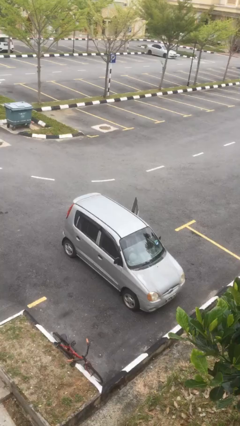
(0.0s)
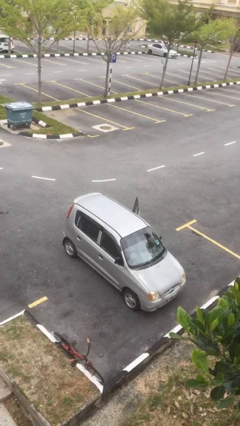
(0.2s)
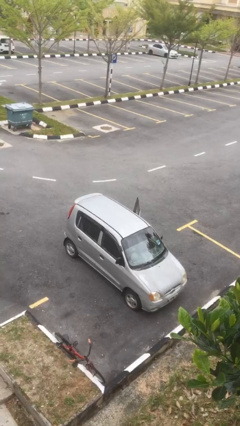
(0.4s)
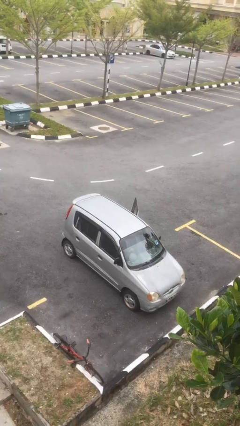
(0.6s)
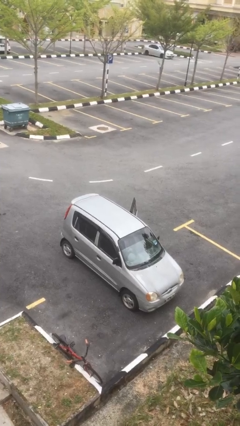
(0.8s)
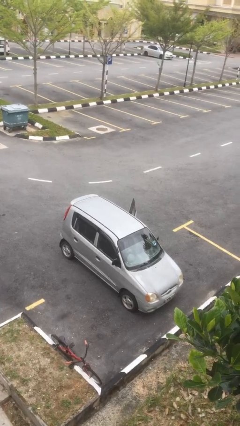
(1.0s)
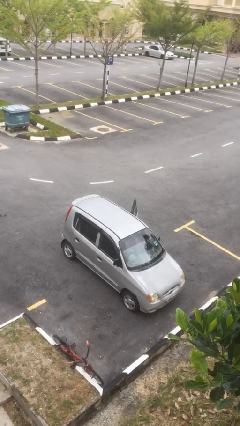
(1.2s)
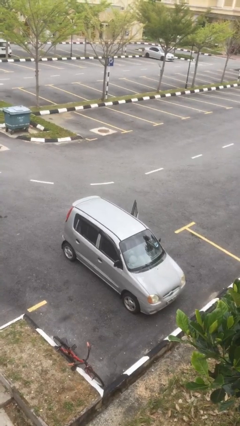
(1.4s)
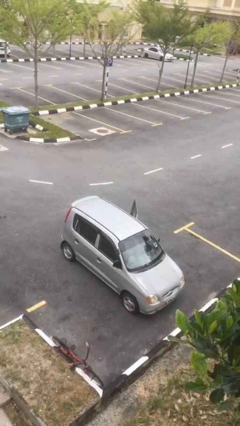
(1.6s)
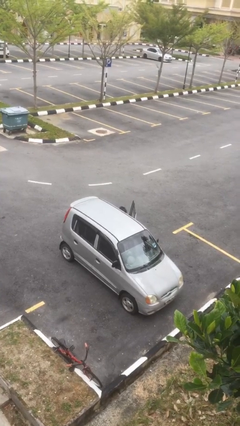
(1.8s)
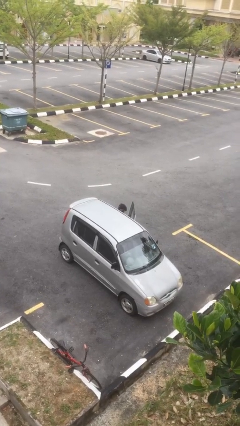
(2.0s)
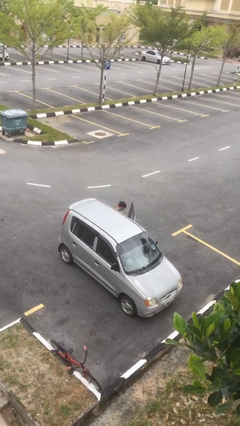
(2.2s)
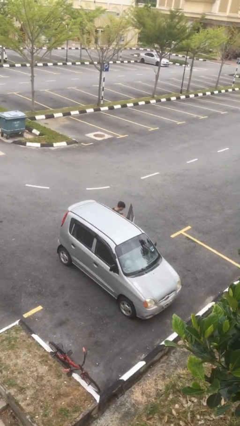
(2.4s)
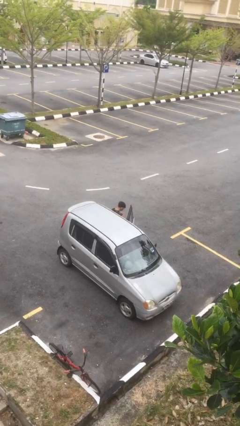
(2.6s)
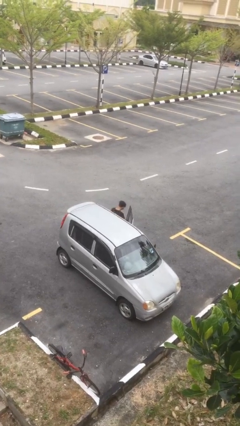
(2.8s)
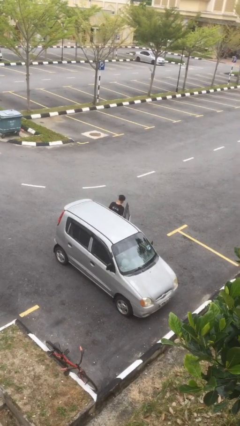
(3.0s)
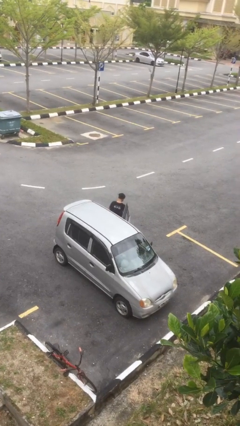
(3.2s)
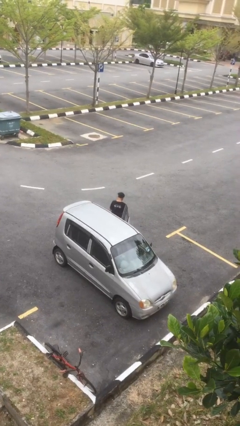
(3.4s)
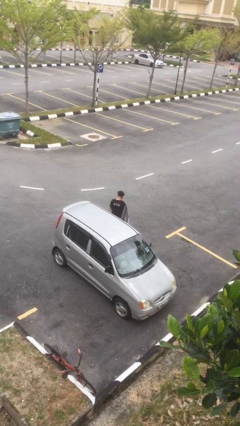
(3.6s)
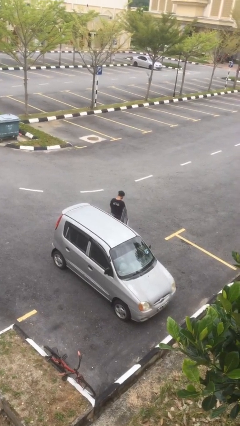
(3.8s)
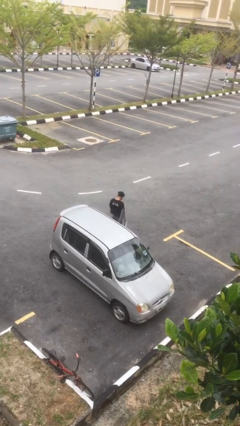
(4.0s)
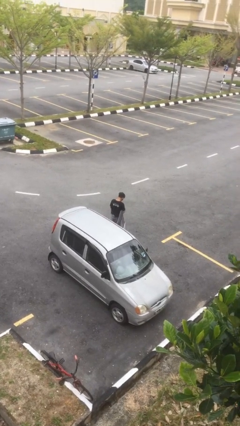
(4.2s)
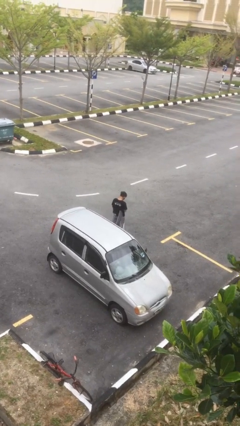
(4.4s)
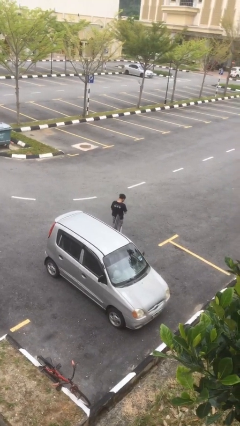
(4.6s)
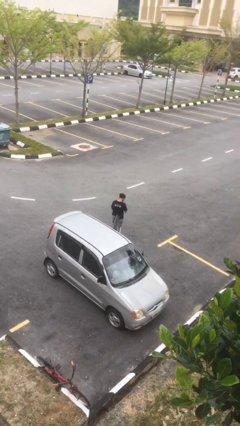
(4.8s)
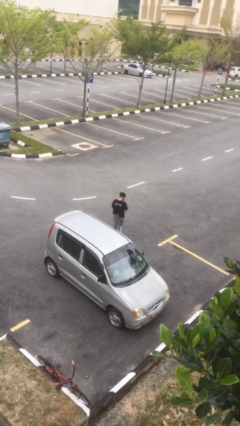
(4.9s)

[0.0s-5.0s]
person exits car

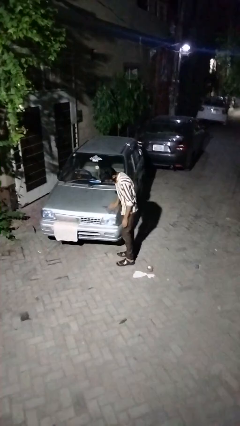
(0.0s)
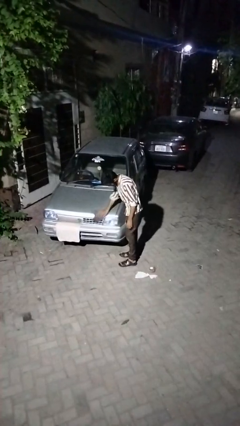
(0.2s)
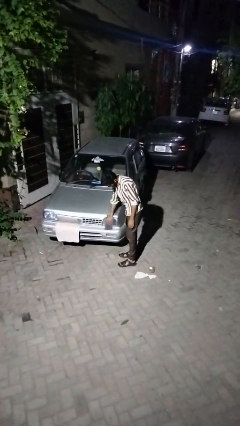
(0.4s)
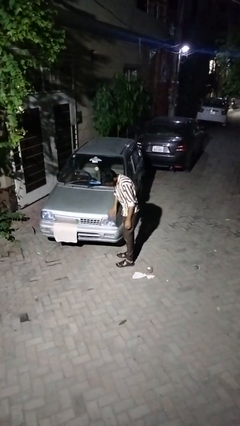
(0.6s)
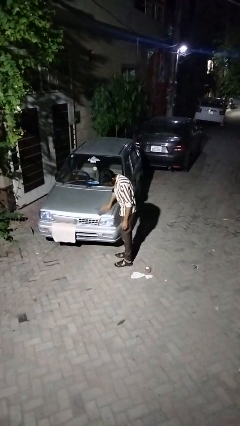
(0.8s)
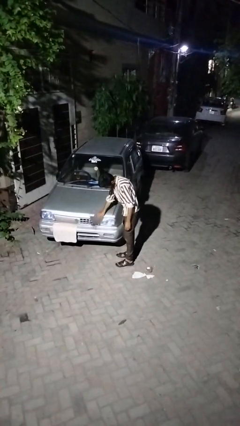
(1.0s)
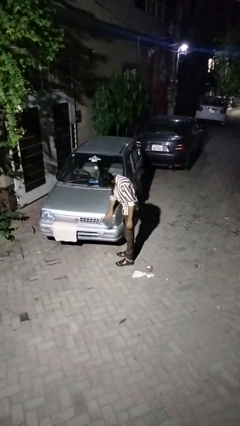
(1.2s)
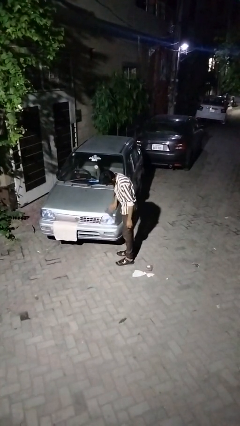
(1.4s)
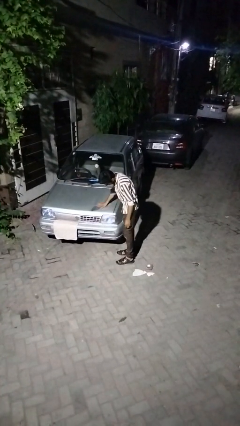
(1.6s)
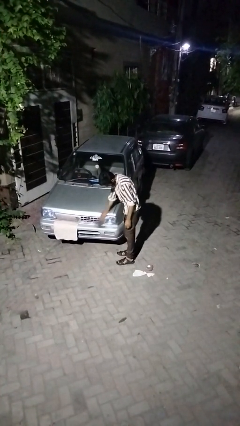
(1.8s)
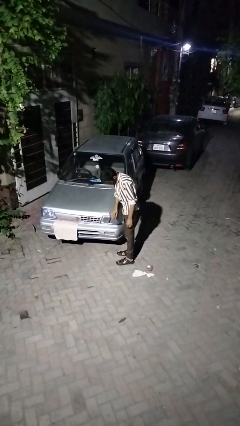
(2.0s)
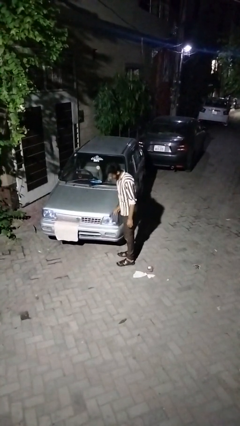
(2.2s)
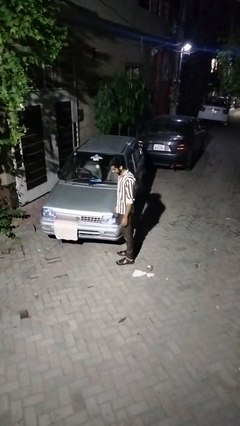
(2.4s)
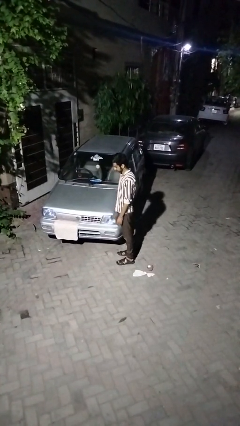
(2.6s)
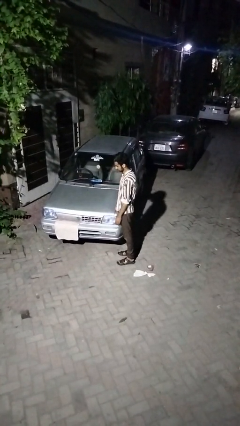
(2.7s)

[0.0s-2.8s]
person polishes car with rag

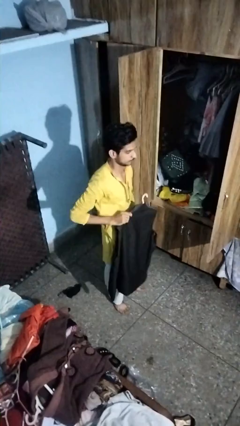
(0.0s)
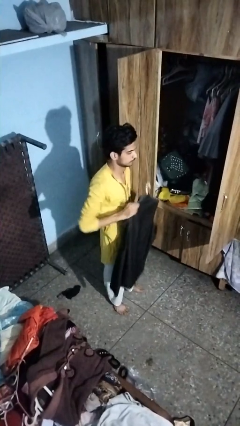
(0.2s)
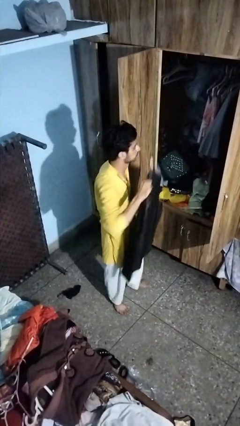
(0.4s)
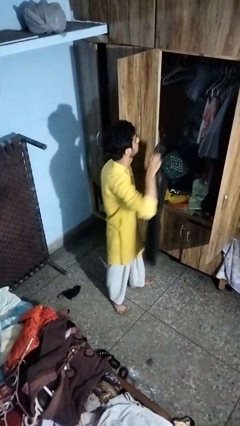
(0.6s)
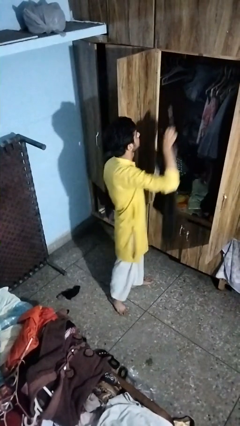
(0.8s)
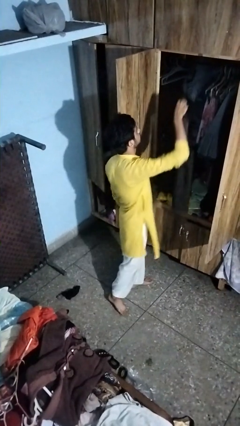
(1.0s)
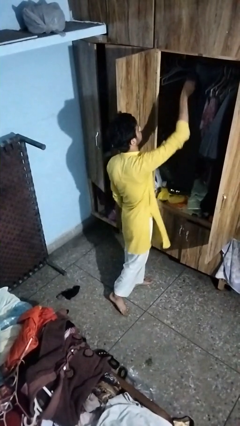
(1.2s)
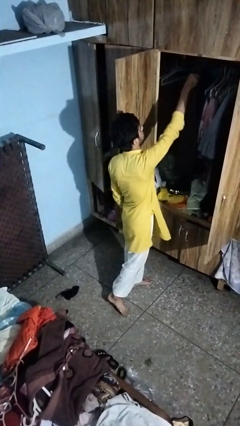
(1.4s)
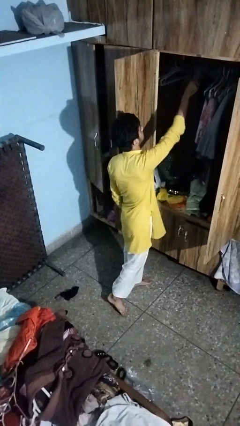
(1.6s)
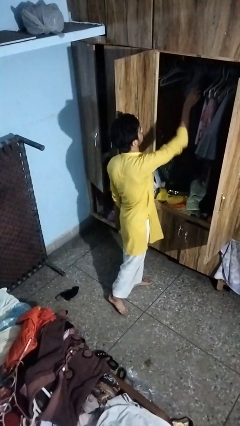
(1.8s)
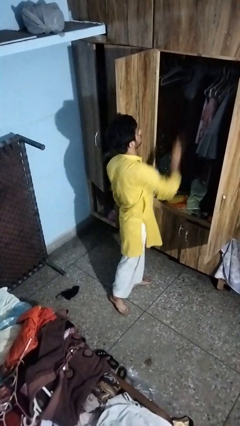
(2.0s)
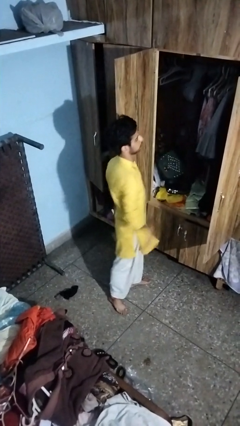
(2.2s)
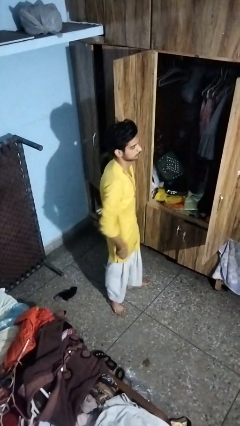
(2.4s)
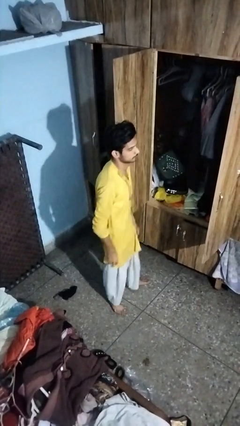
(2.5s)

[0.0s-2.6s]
person puts clothes into closet

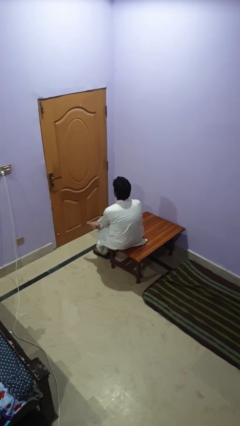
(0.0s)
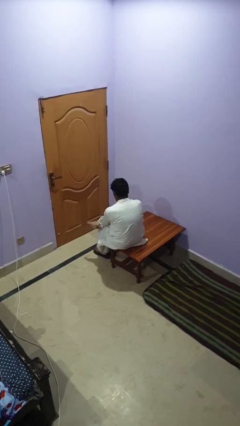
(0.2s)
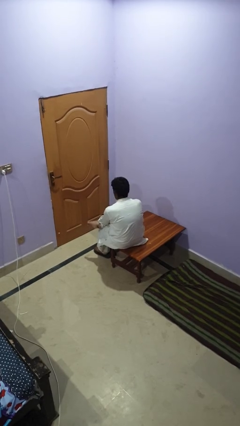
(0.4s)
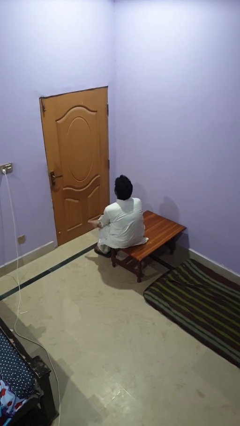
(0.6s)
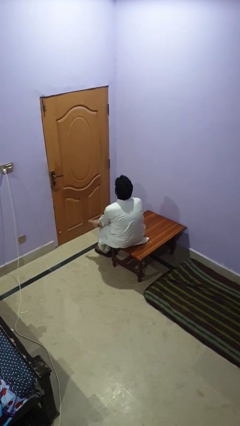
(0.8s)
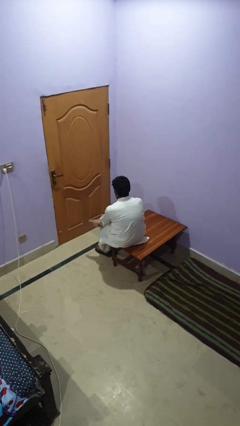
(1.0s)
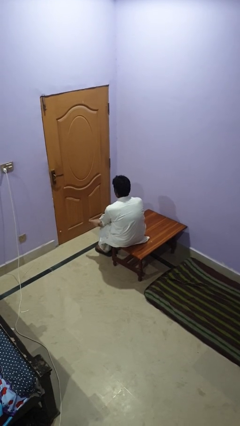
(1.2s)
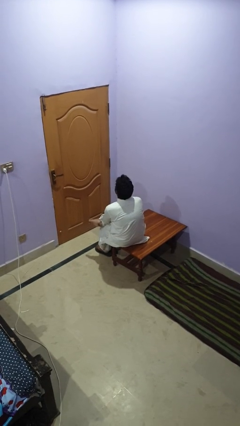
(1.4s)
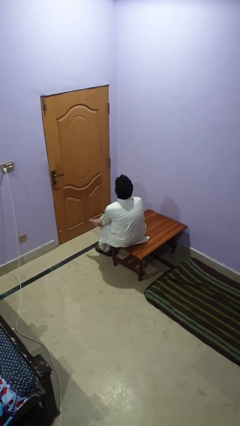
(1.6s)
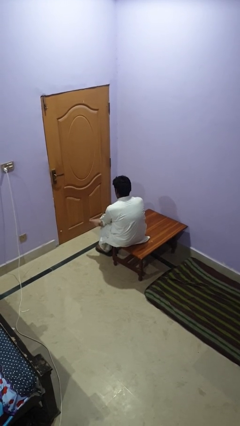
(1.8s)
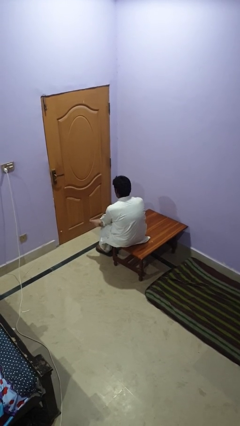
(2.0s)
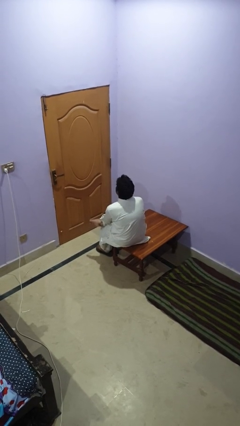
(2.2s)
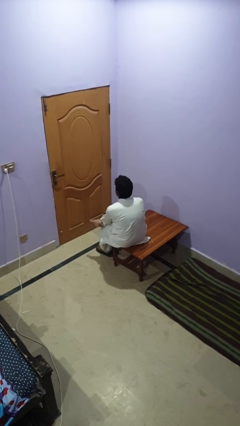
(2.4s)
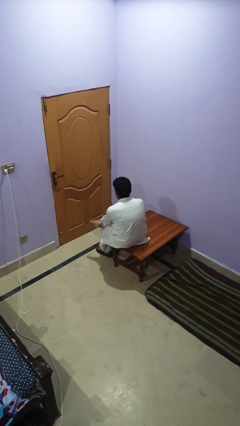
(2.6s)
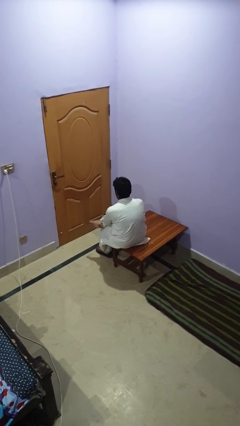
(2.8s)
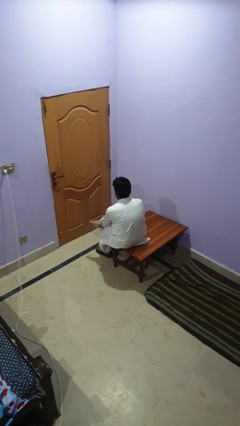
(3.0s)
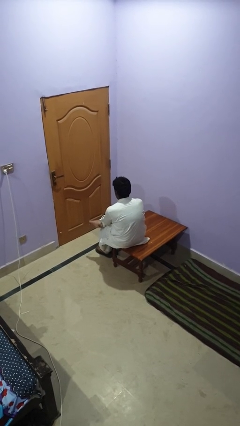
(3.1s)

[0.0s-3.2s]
person nods head

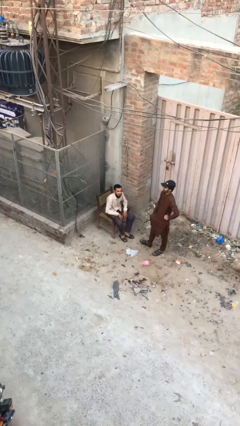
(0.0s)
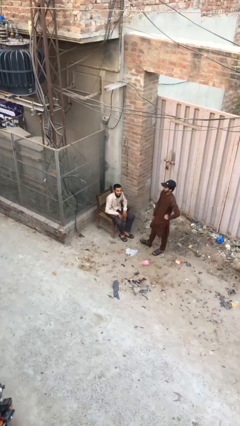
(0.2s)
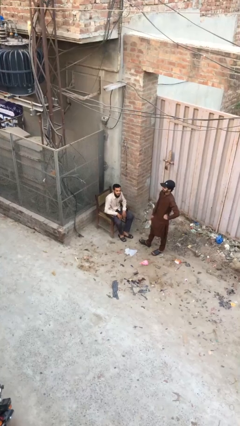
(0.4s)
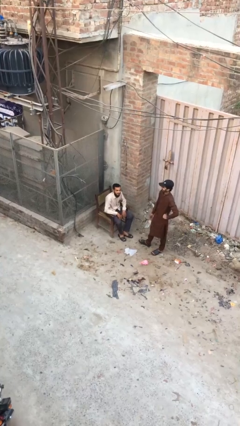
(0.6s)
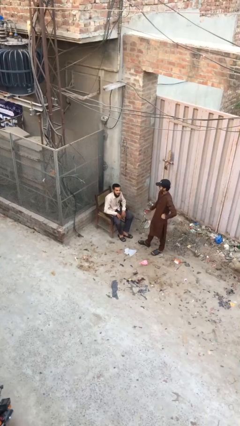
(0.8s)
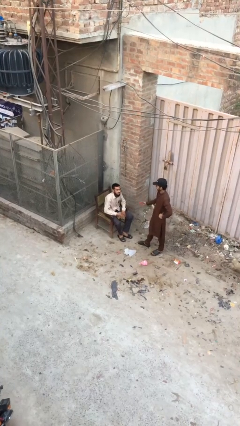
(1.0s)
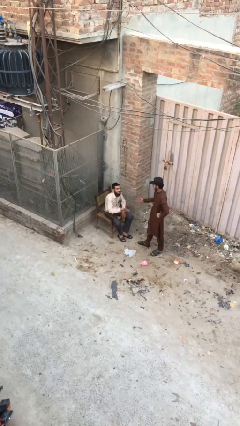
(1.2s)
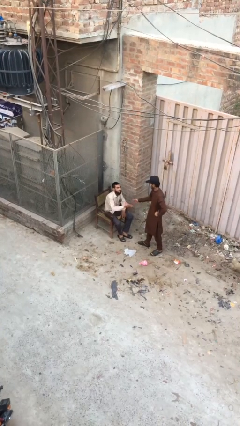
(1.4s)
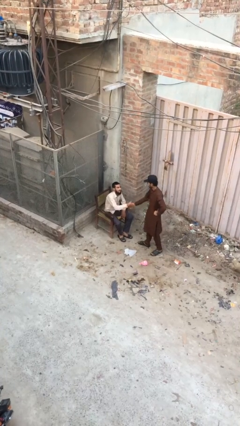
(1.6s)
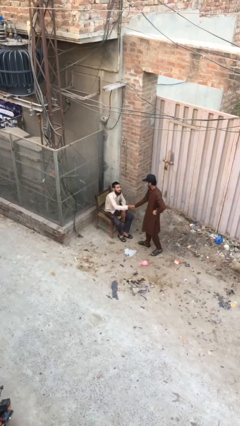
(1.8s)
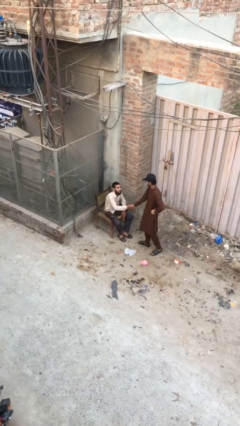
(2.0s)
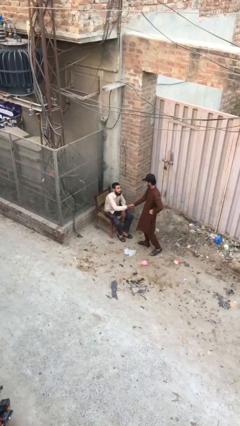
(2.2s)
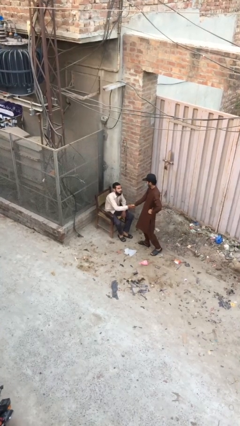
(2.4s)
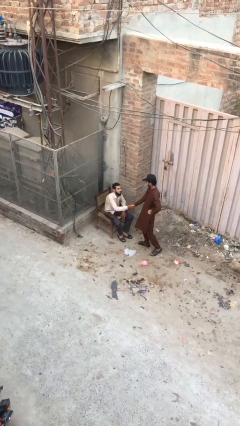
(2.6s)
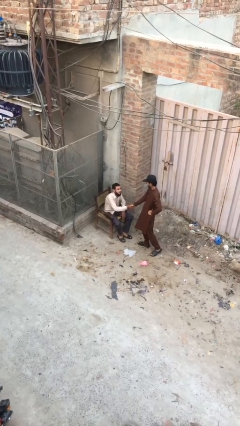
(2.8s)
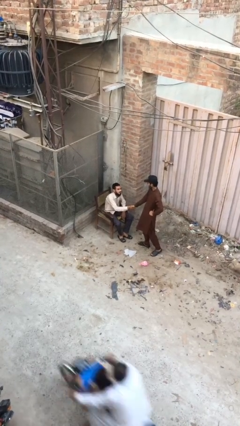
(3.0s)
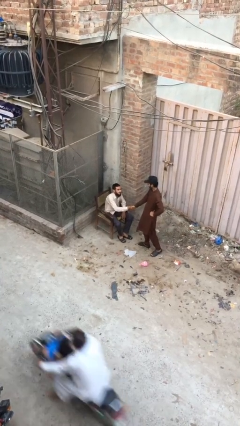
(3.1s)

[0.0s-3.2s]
person shakes hand

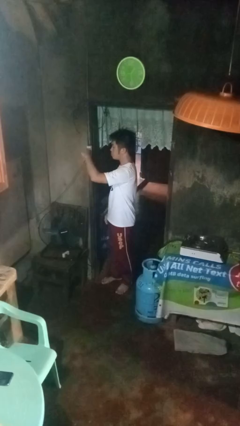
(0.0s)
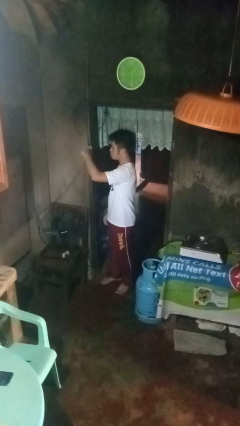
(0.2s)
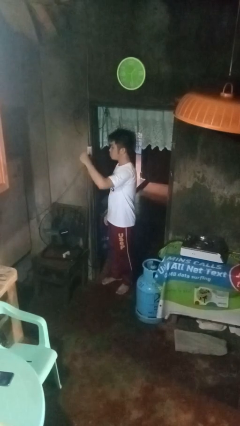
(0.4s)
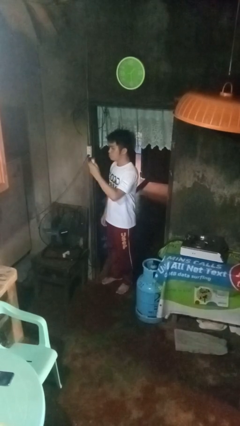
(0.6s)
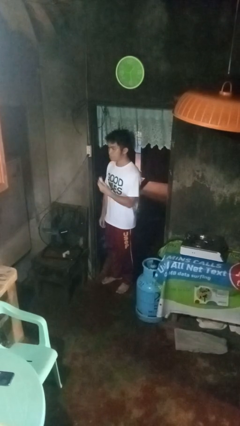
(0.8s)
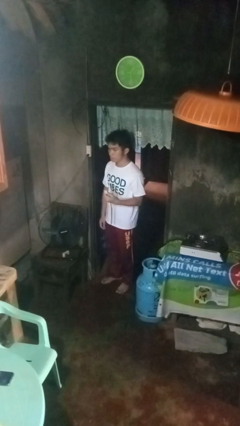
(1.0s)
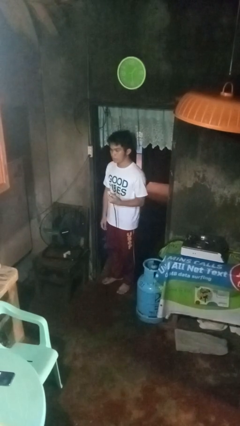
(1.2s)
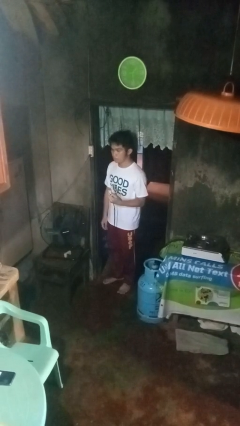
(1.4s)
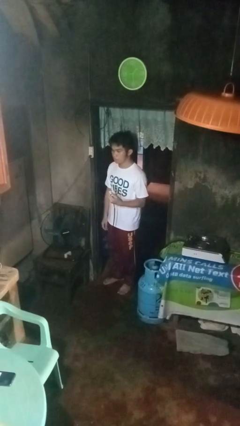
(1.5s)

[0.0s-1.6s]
person unplugs from electrical socket
